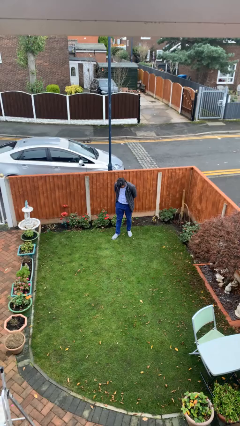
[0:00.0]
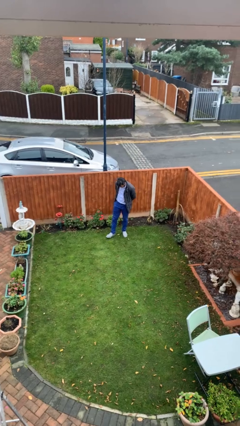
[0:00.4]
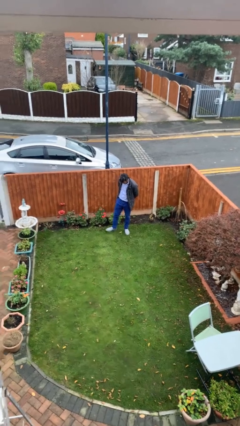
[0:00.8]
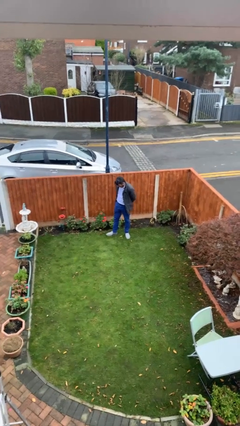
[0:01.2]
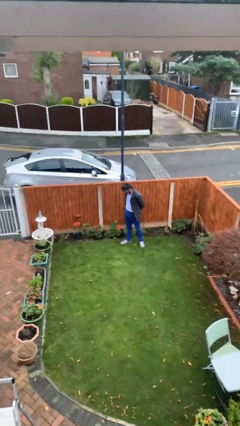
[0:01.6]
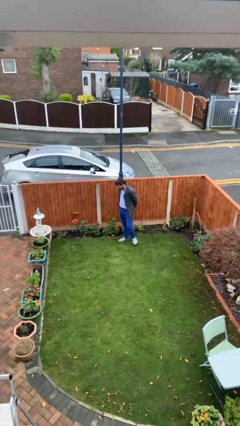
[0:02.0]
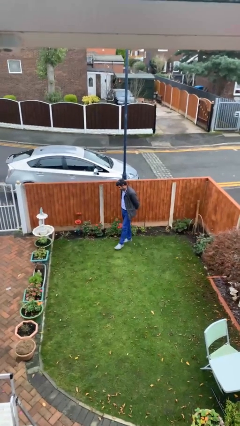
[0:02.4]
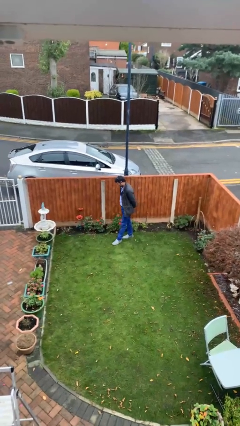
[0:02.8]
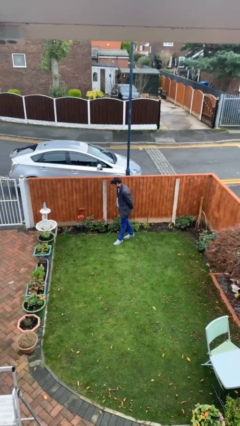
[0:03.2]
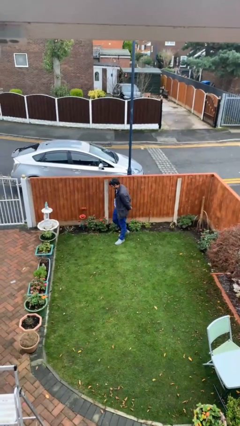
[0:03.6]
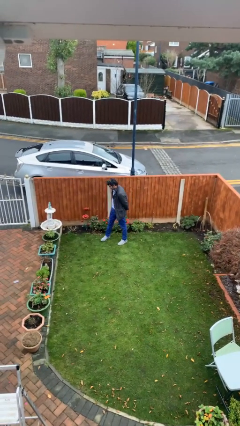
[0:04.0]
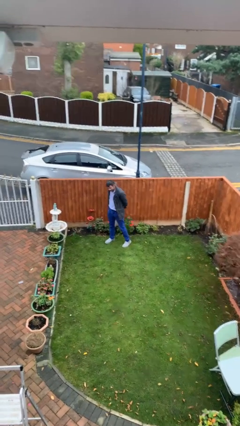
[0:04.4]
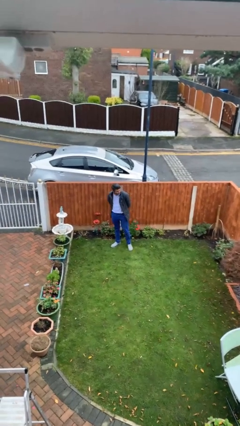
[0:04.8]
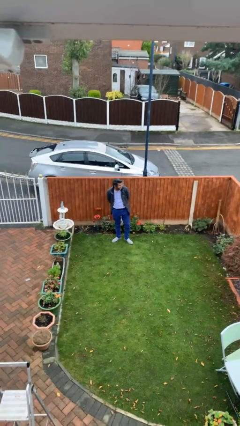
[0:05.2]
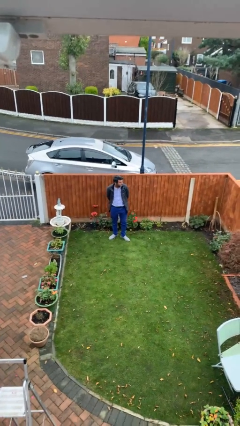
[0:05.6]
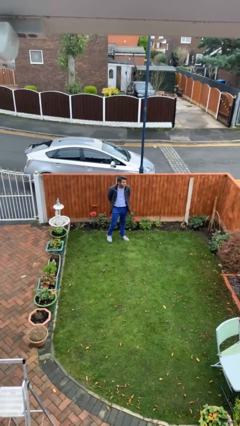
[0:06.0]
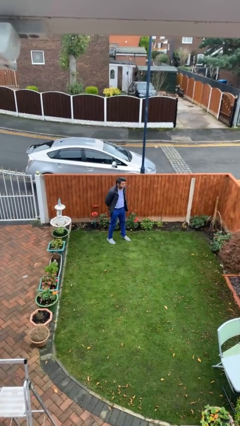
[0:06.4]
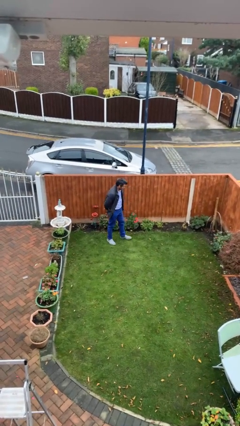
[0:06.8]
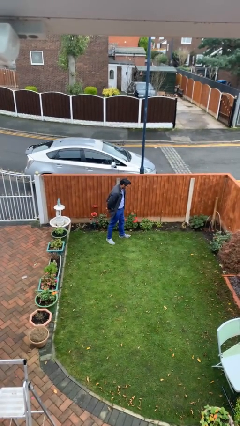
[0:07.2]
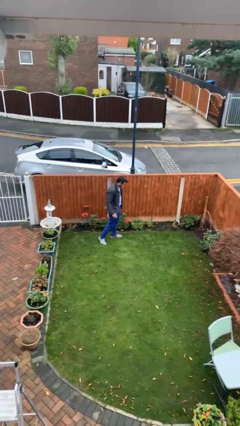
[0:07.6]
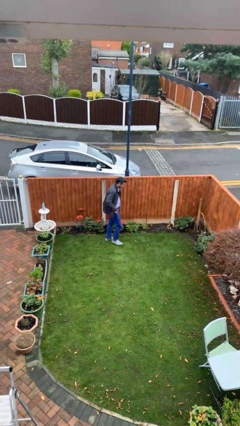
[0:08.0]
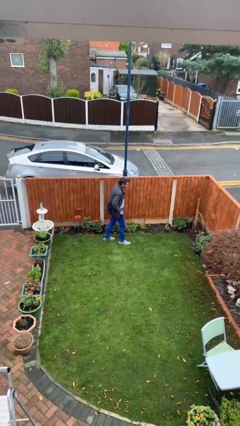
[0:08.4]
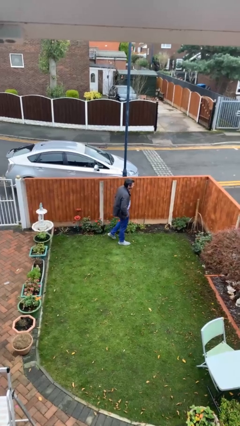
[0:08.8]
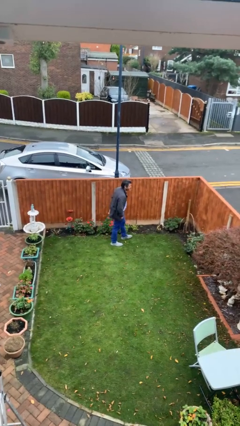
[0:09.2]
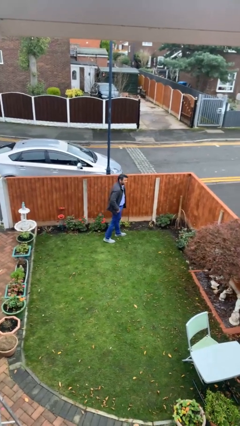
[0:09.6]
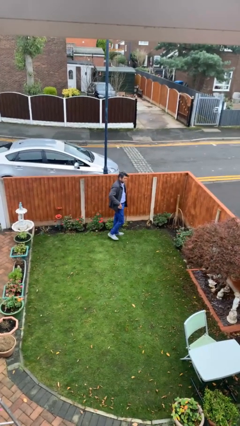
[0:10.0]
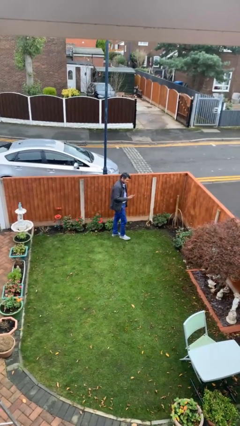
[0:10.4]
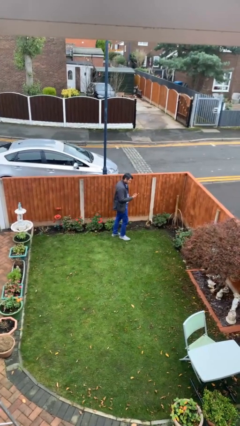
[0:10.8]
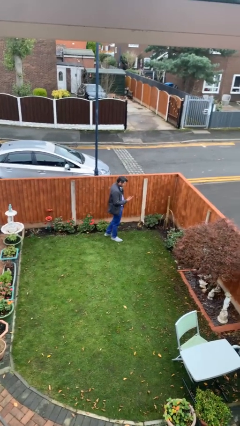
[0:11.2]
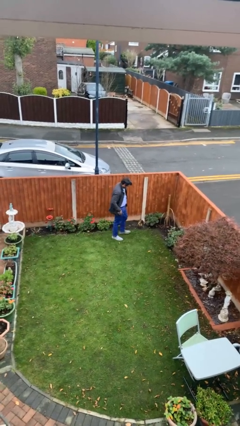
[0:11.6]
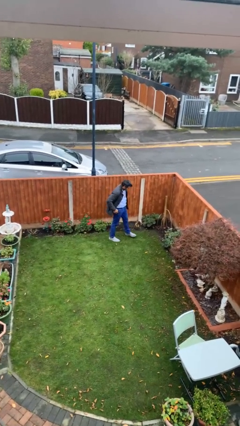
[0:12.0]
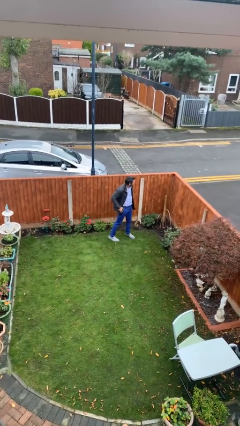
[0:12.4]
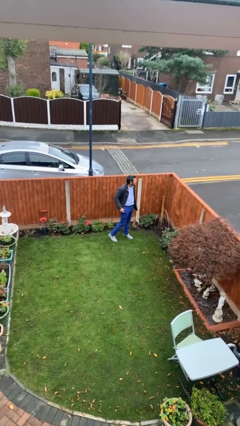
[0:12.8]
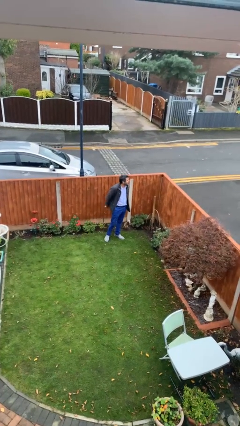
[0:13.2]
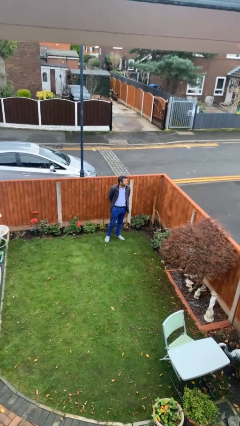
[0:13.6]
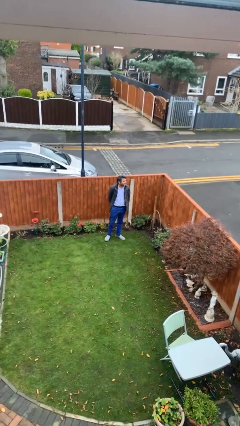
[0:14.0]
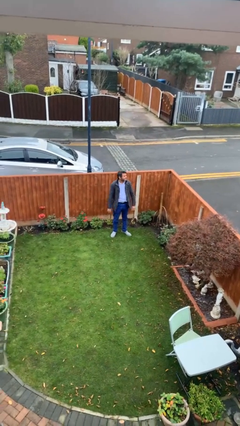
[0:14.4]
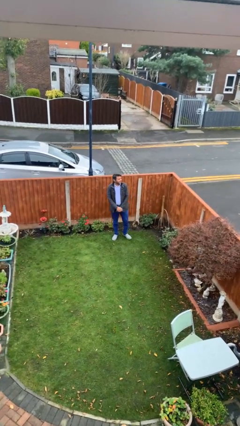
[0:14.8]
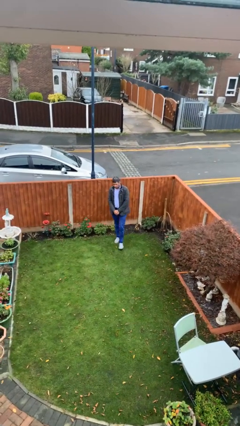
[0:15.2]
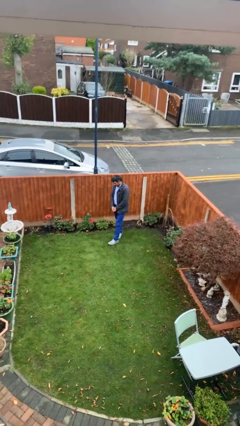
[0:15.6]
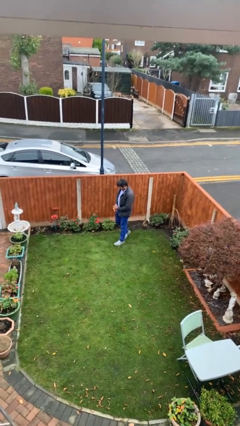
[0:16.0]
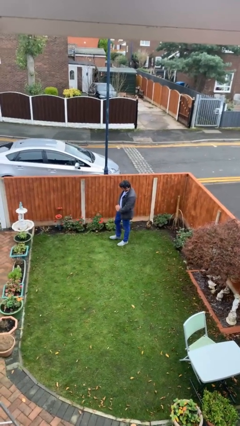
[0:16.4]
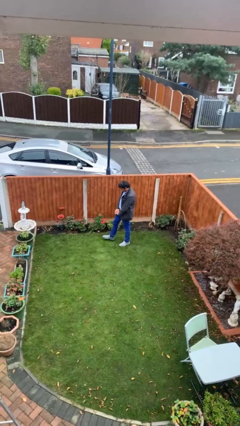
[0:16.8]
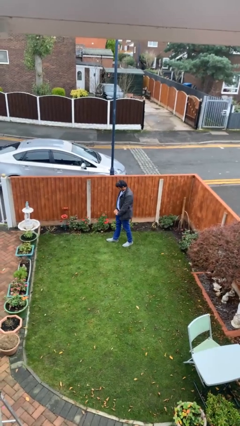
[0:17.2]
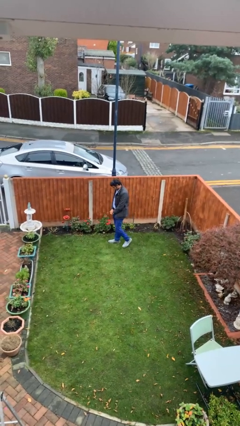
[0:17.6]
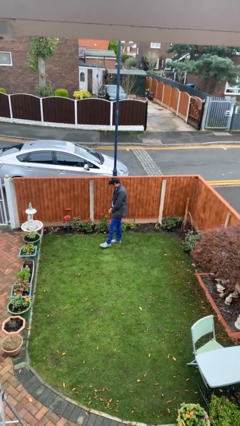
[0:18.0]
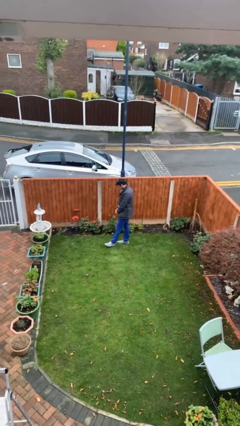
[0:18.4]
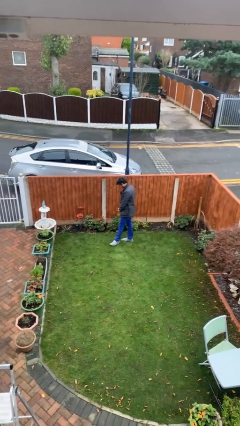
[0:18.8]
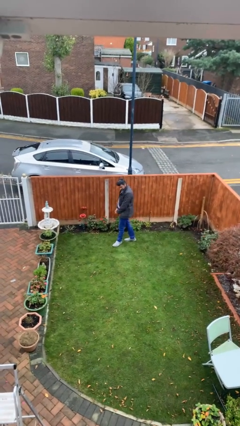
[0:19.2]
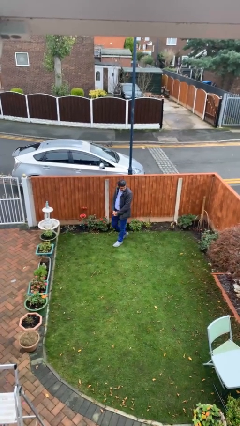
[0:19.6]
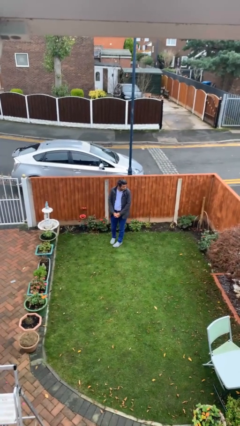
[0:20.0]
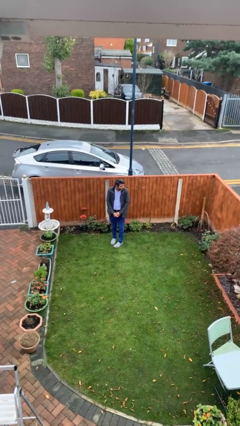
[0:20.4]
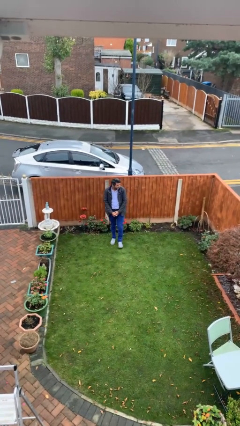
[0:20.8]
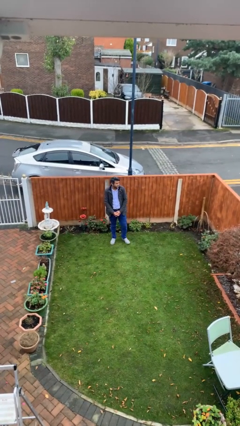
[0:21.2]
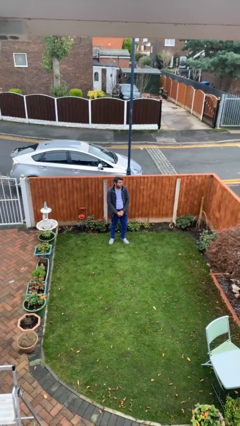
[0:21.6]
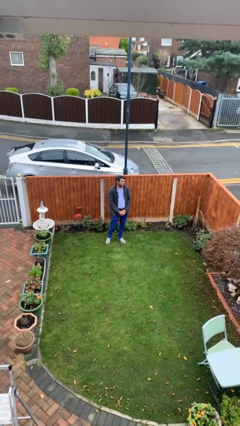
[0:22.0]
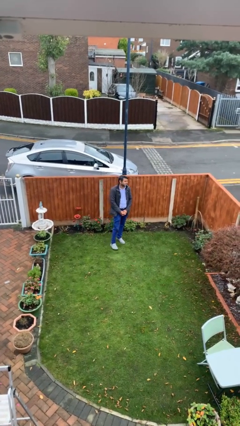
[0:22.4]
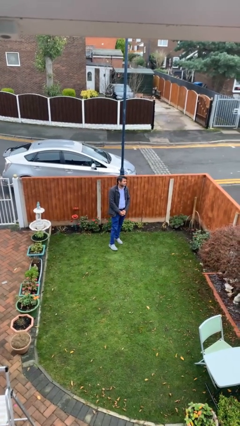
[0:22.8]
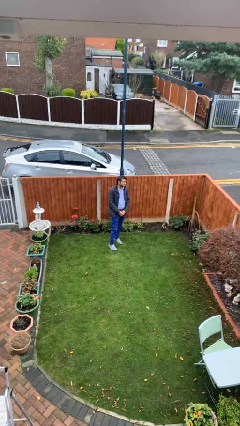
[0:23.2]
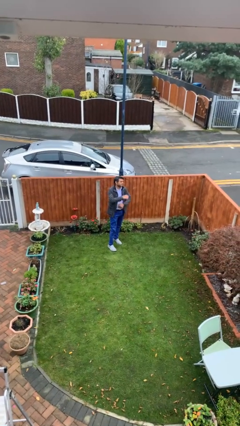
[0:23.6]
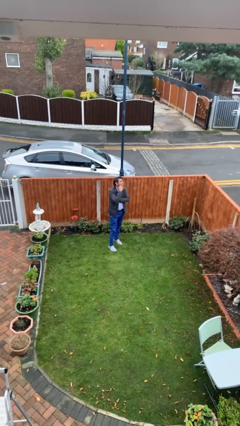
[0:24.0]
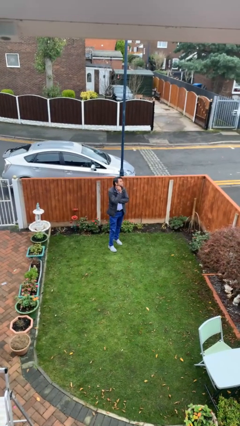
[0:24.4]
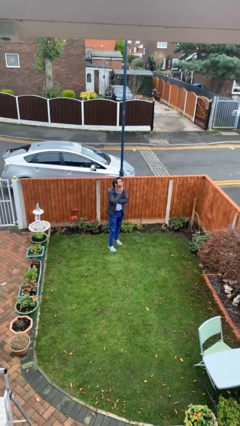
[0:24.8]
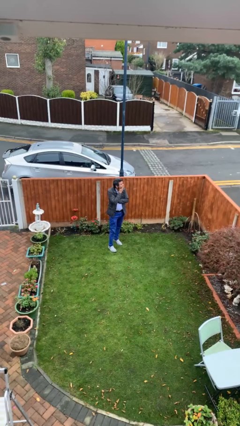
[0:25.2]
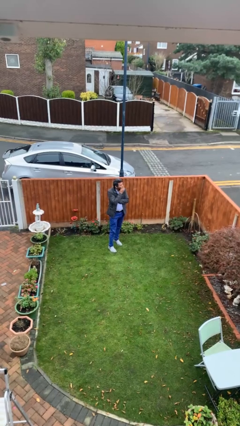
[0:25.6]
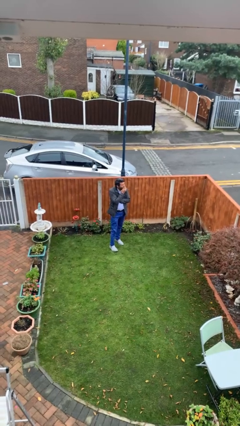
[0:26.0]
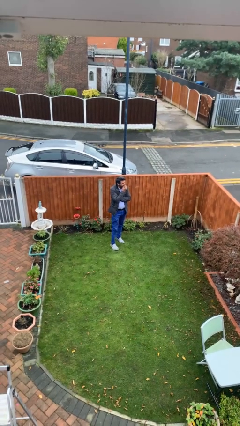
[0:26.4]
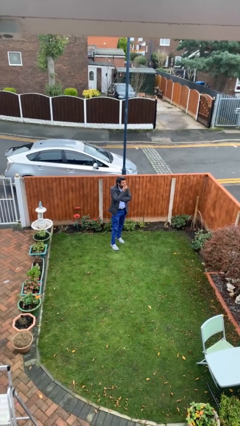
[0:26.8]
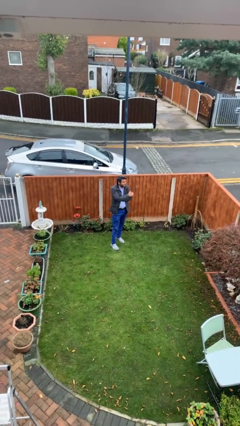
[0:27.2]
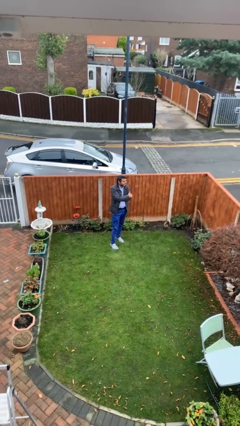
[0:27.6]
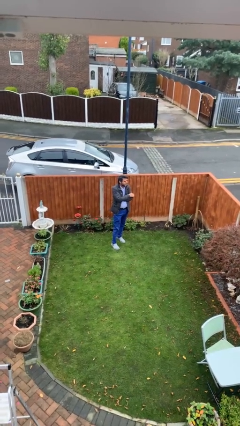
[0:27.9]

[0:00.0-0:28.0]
person walks

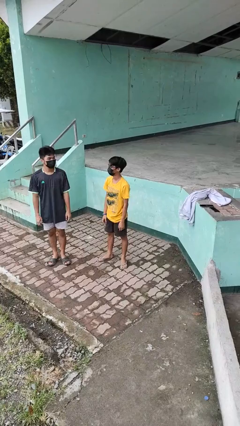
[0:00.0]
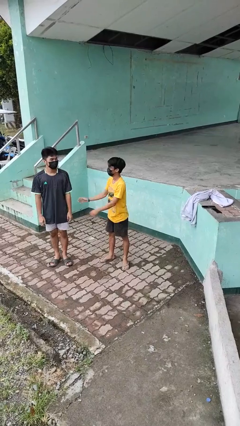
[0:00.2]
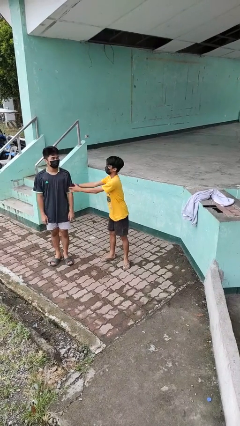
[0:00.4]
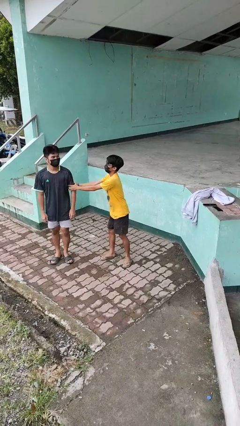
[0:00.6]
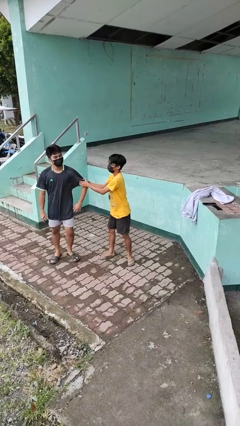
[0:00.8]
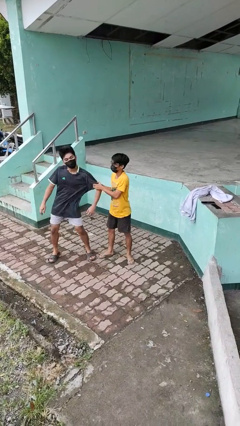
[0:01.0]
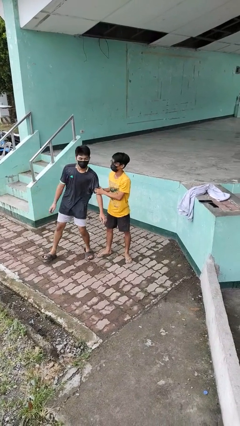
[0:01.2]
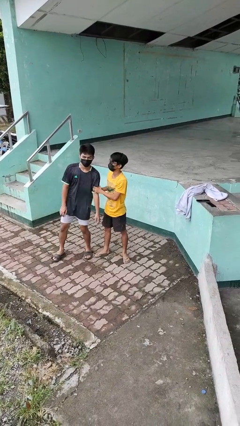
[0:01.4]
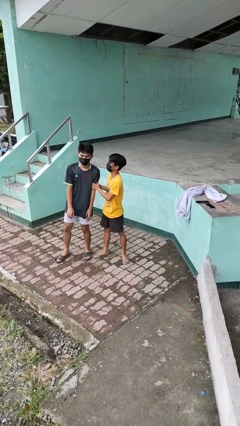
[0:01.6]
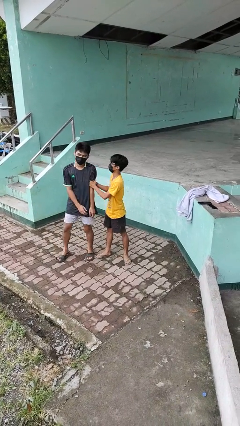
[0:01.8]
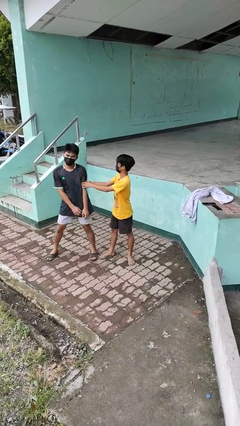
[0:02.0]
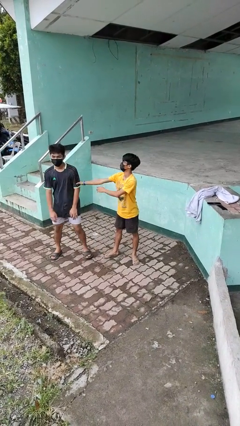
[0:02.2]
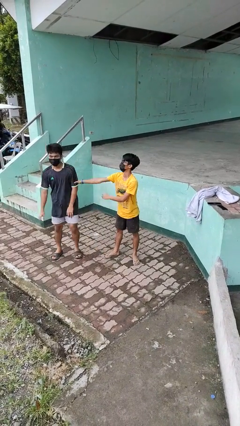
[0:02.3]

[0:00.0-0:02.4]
person grabs person by bicep

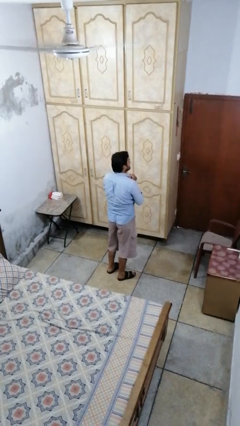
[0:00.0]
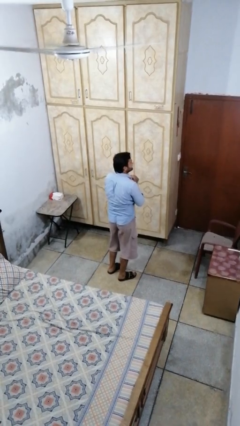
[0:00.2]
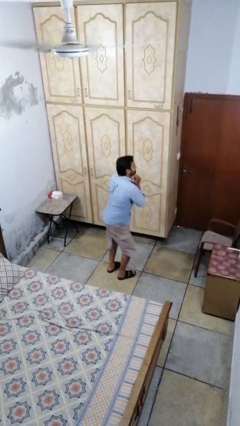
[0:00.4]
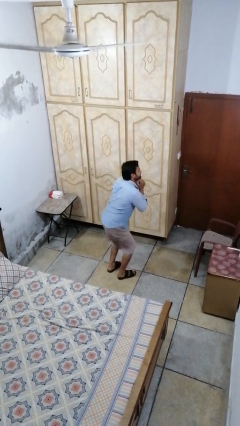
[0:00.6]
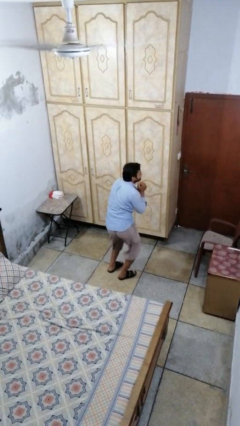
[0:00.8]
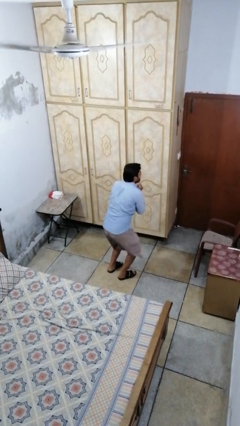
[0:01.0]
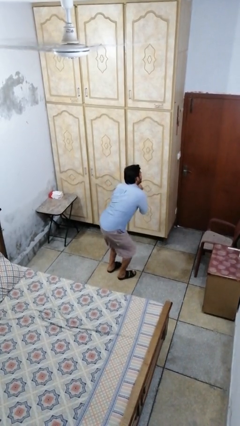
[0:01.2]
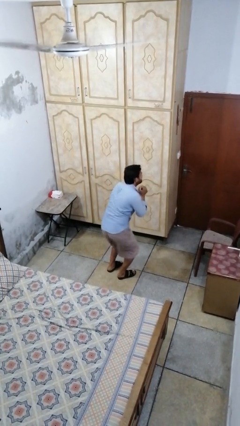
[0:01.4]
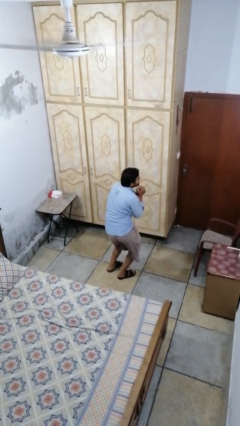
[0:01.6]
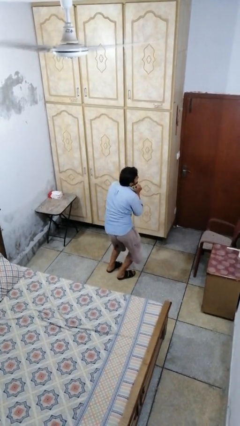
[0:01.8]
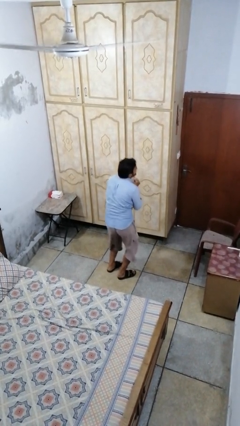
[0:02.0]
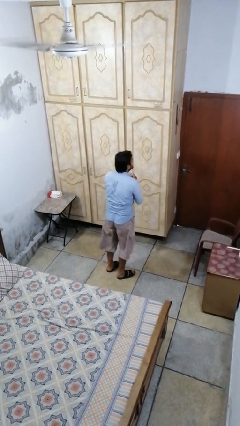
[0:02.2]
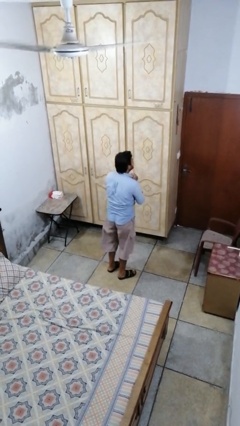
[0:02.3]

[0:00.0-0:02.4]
person wiggles hips
